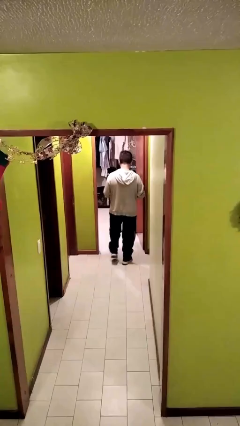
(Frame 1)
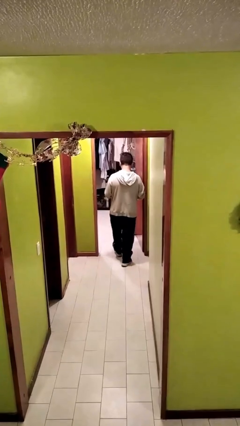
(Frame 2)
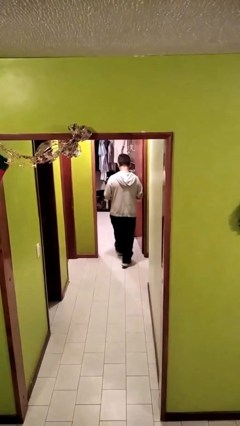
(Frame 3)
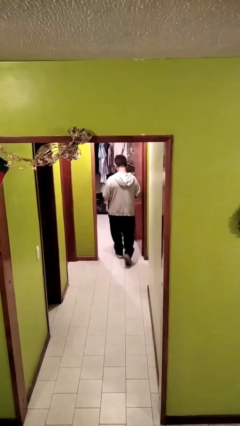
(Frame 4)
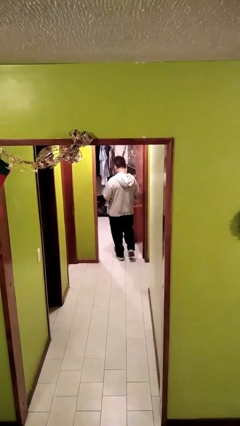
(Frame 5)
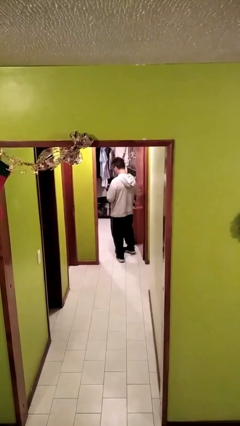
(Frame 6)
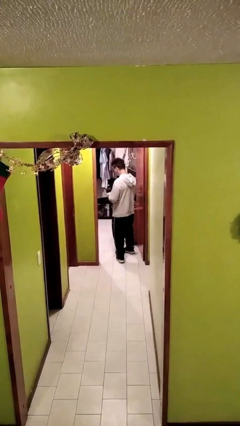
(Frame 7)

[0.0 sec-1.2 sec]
person exits scene through structure

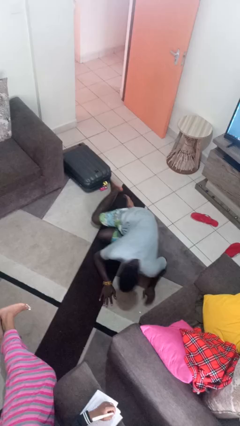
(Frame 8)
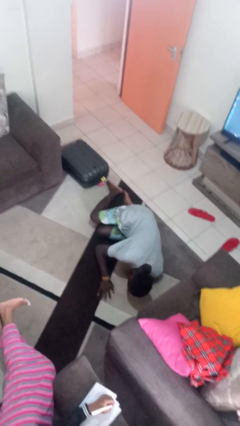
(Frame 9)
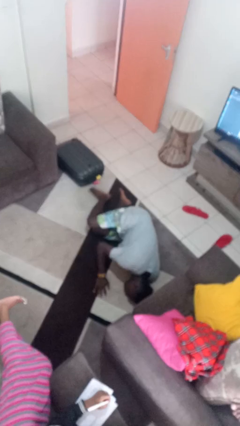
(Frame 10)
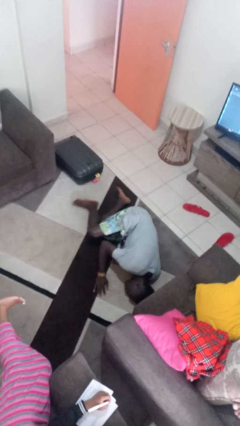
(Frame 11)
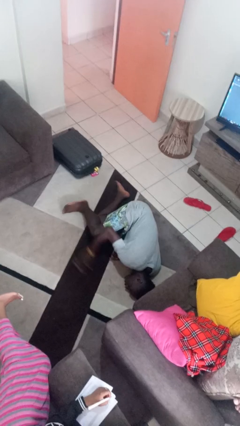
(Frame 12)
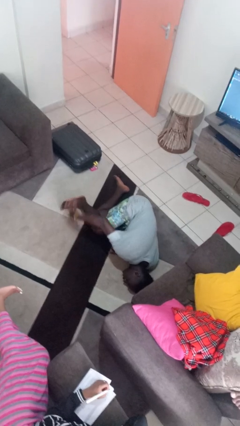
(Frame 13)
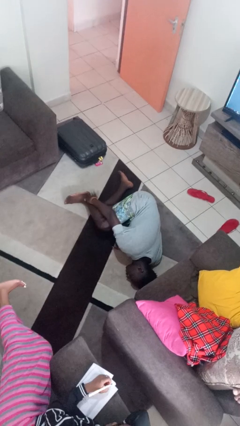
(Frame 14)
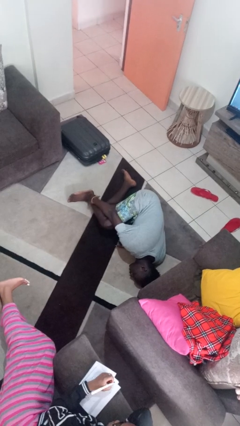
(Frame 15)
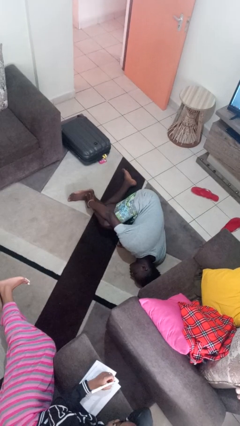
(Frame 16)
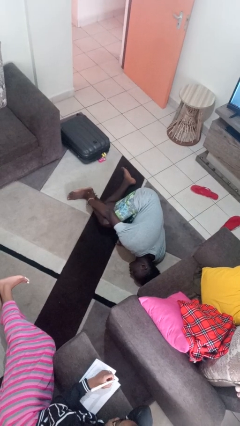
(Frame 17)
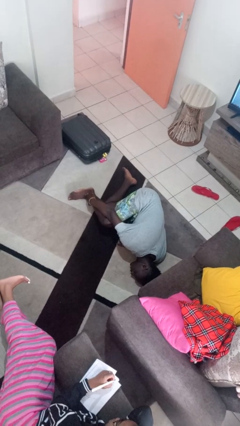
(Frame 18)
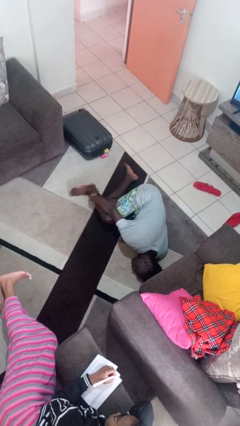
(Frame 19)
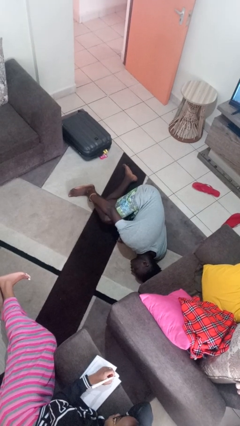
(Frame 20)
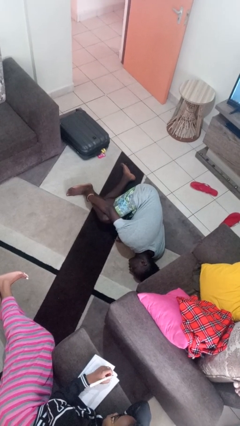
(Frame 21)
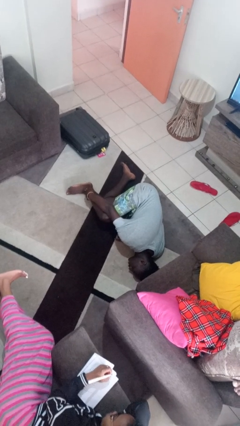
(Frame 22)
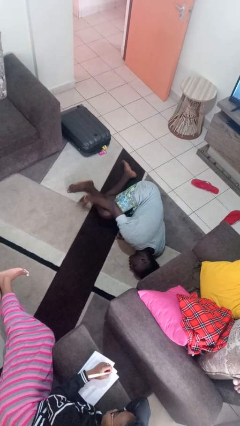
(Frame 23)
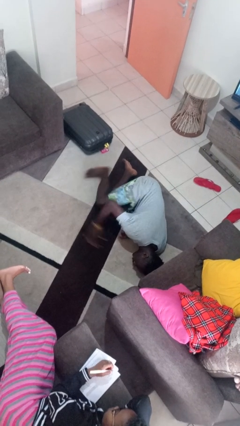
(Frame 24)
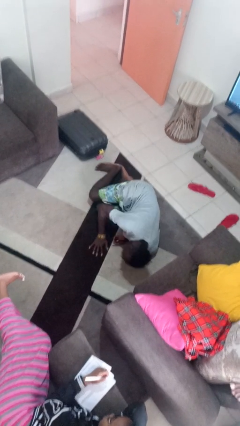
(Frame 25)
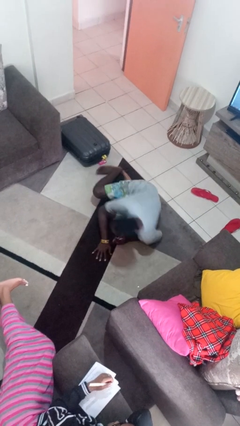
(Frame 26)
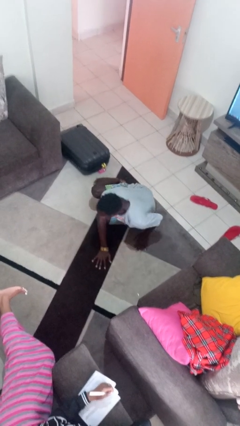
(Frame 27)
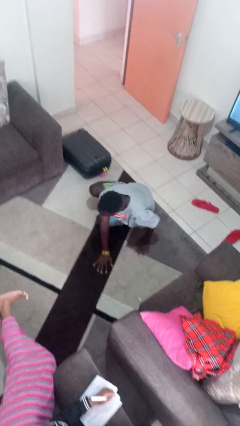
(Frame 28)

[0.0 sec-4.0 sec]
person lies down on floor

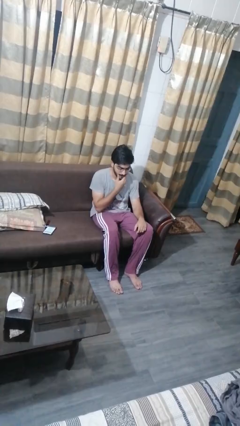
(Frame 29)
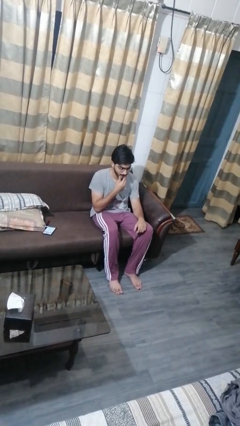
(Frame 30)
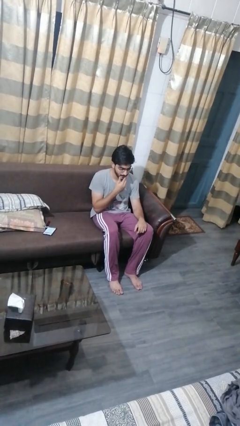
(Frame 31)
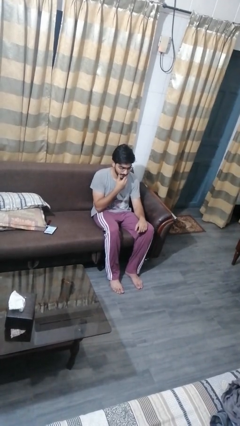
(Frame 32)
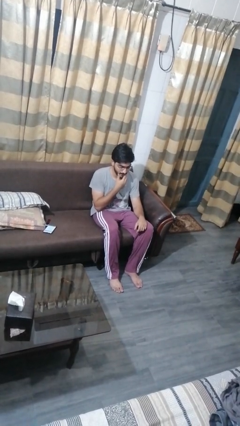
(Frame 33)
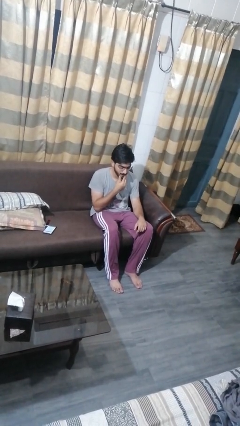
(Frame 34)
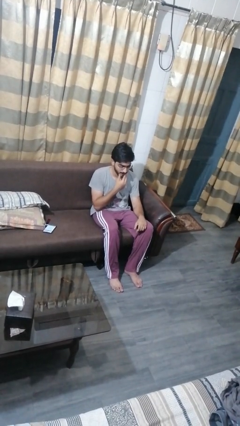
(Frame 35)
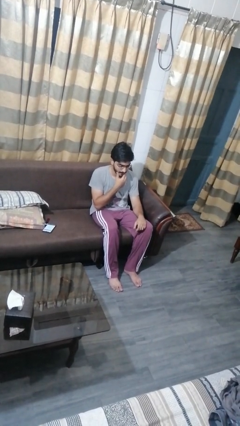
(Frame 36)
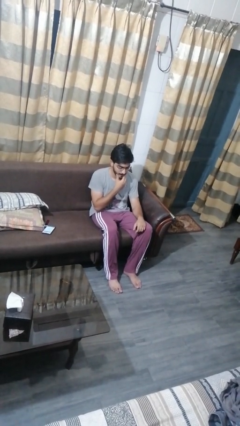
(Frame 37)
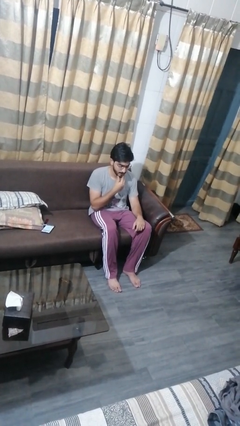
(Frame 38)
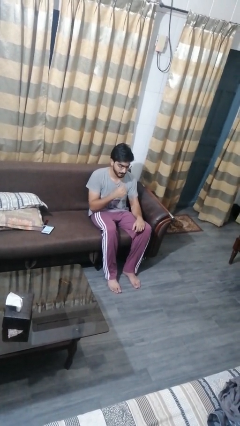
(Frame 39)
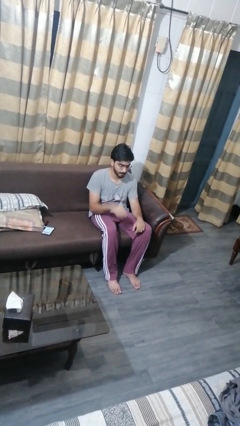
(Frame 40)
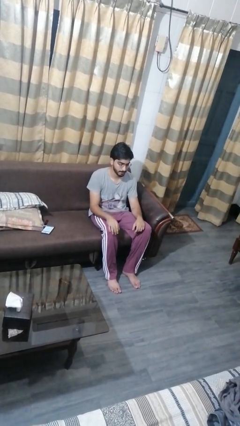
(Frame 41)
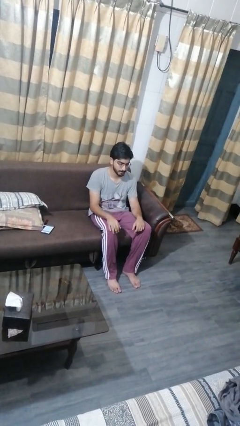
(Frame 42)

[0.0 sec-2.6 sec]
person strokes chin

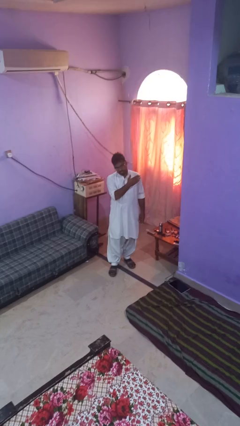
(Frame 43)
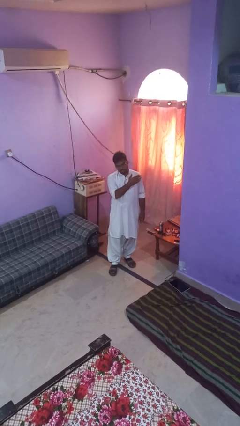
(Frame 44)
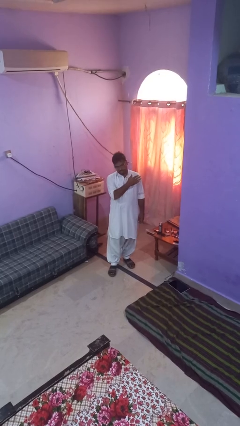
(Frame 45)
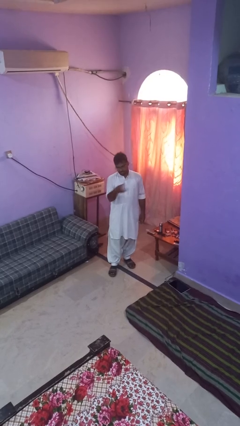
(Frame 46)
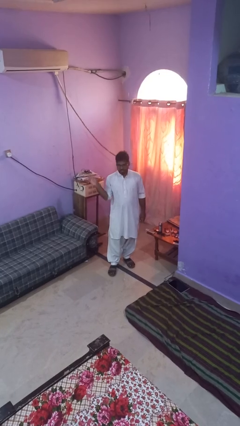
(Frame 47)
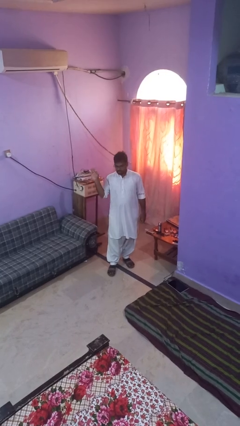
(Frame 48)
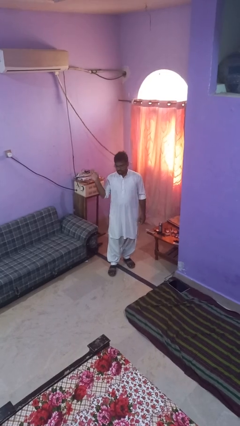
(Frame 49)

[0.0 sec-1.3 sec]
person gestures swipe right

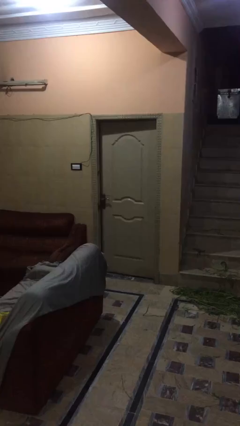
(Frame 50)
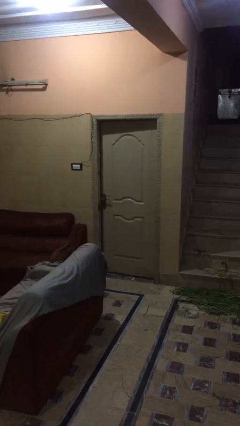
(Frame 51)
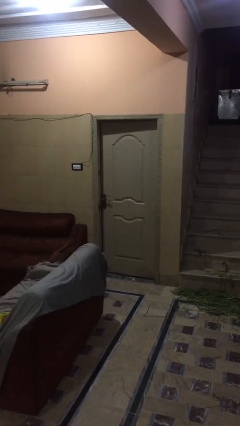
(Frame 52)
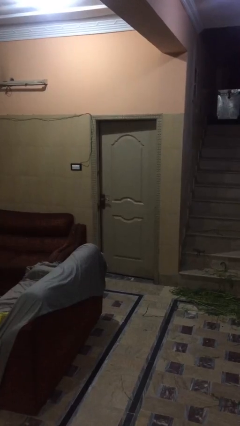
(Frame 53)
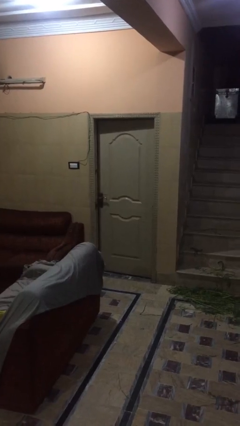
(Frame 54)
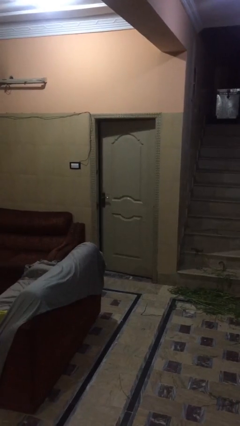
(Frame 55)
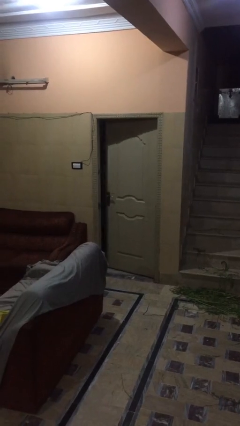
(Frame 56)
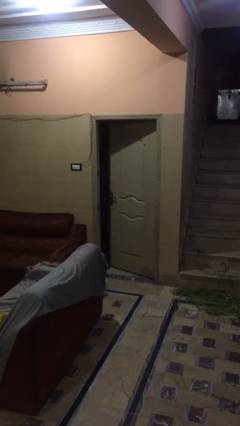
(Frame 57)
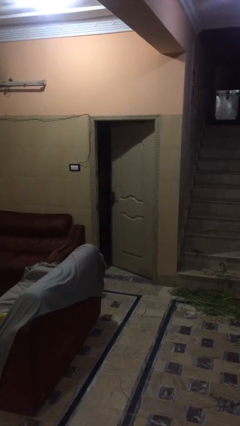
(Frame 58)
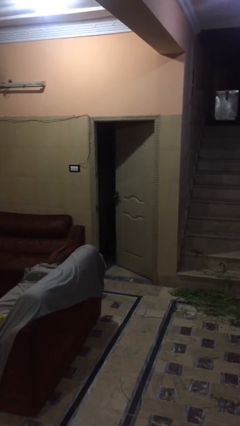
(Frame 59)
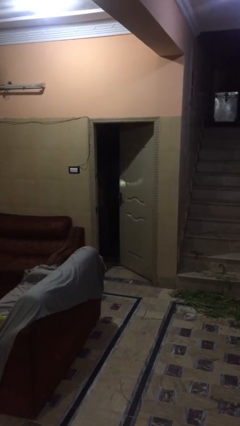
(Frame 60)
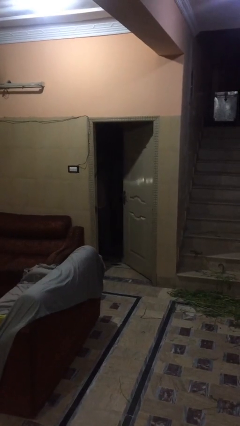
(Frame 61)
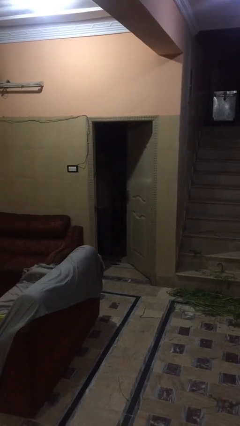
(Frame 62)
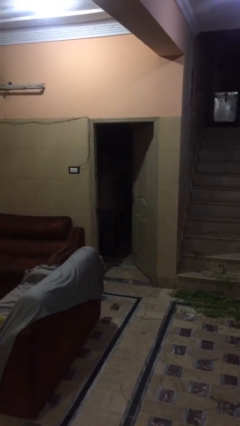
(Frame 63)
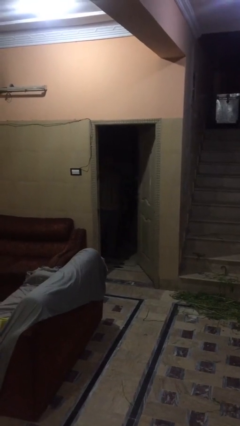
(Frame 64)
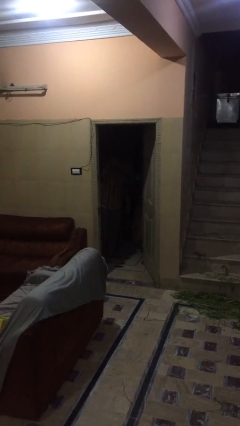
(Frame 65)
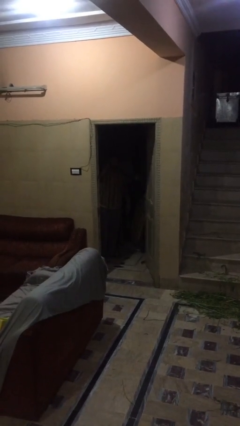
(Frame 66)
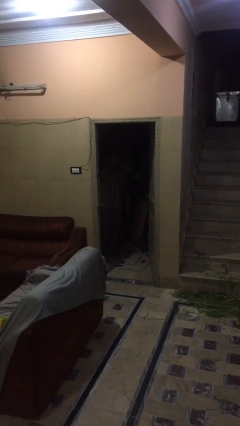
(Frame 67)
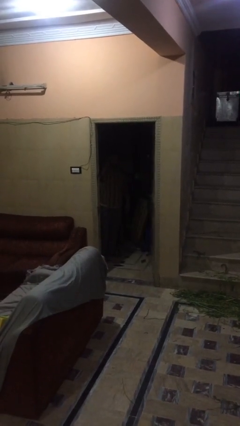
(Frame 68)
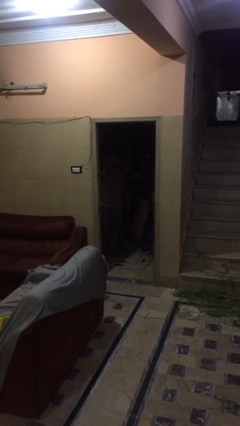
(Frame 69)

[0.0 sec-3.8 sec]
person opens facility door

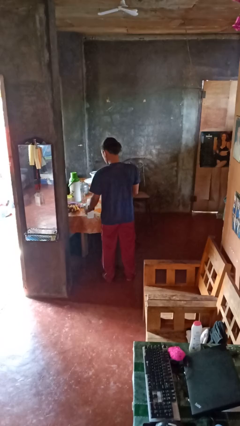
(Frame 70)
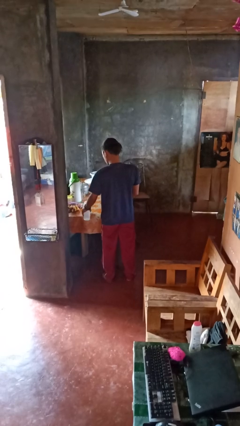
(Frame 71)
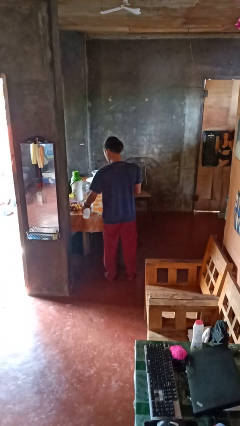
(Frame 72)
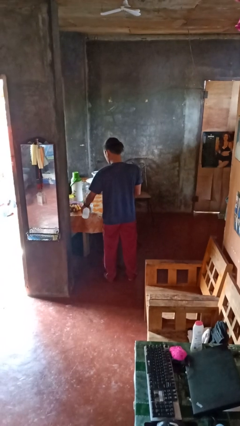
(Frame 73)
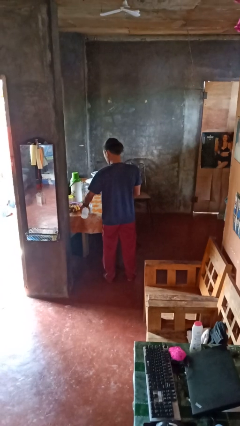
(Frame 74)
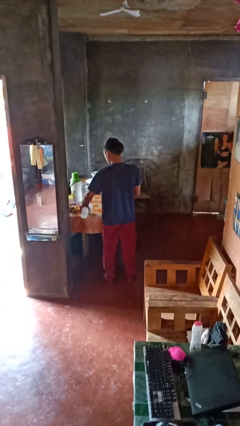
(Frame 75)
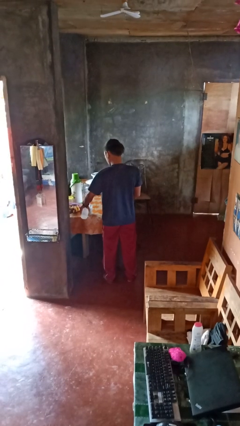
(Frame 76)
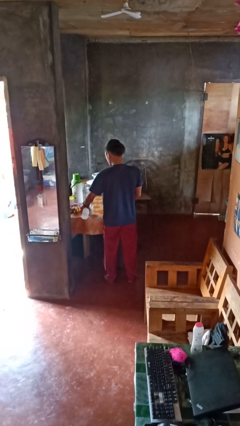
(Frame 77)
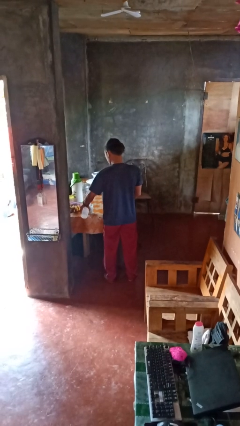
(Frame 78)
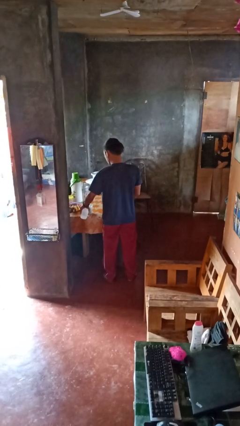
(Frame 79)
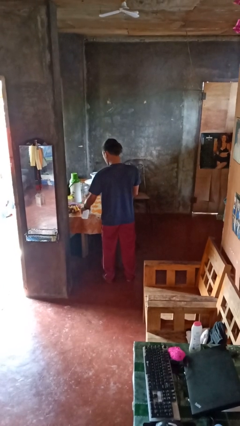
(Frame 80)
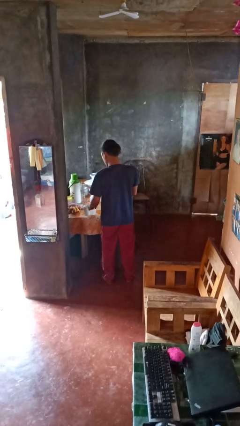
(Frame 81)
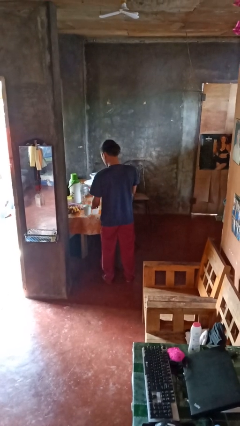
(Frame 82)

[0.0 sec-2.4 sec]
person pours liquid into cup
